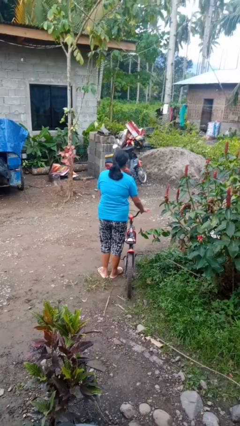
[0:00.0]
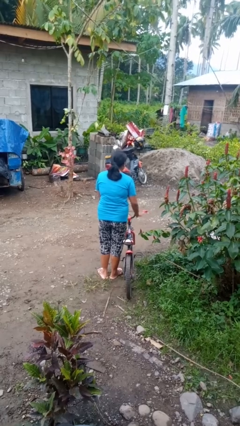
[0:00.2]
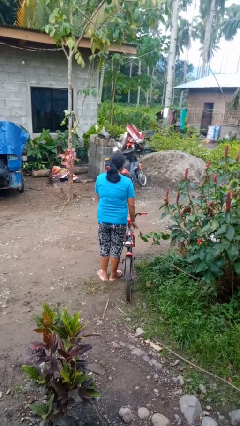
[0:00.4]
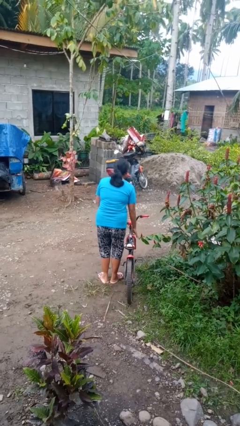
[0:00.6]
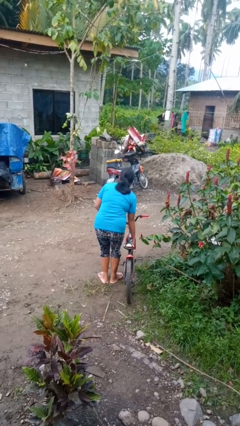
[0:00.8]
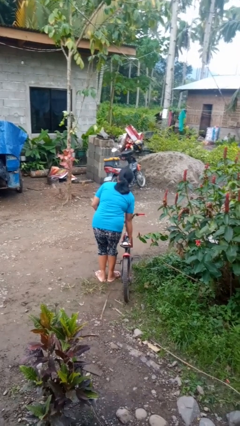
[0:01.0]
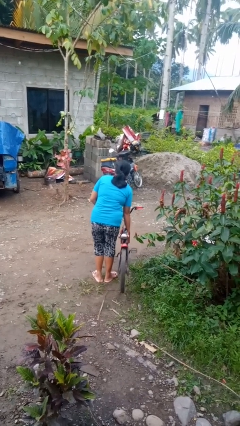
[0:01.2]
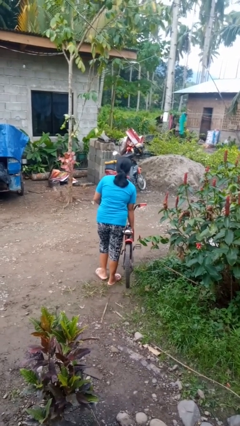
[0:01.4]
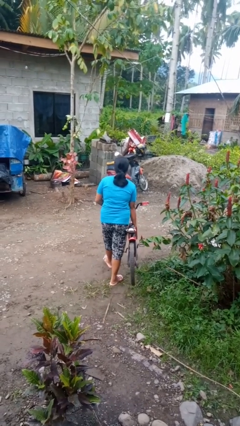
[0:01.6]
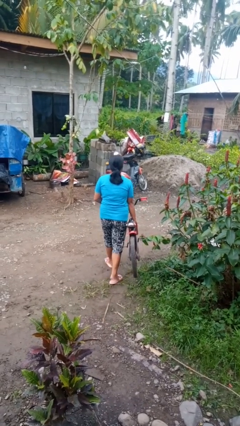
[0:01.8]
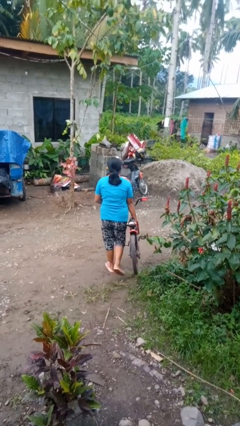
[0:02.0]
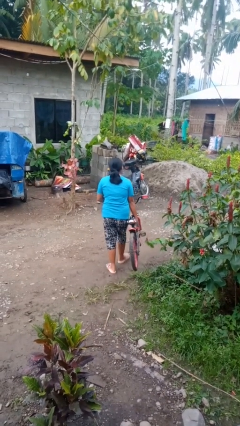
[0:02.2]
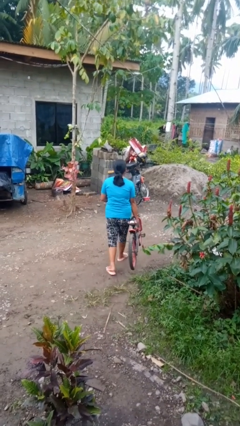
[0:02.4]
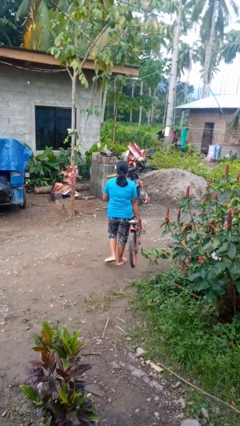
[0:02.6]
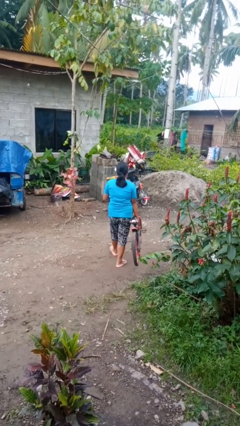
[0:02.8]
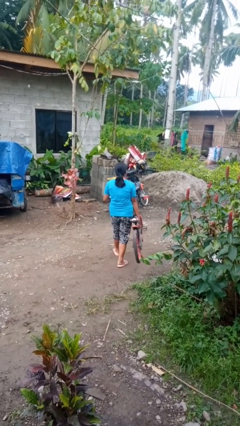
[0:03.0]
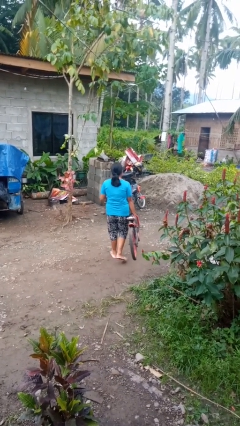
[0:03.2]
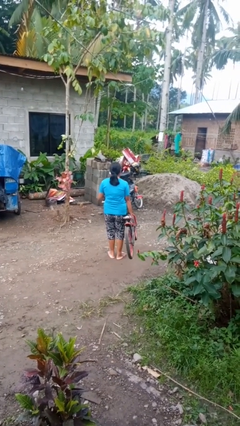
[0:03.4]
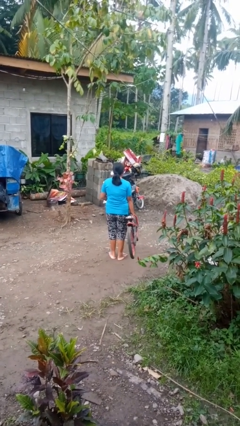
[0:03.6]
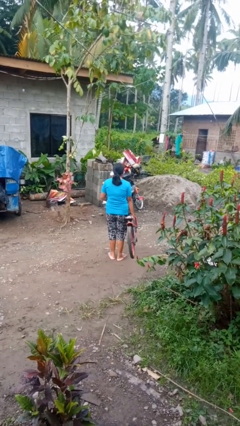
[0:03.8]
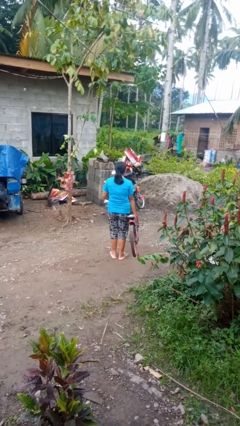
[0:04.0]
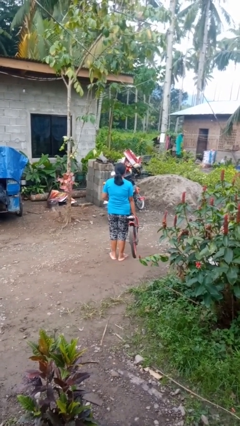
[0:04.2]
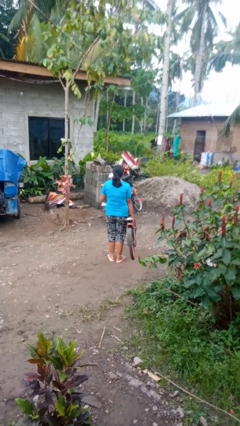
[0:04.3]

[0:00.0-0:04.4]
person carries bicycle

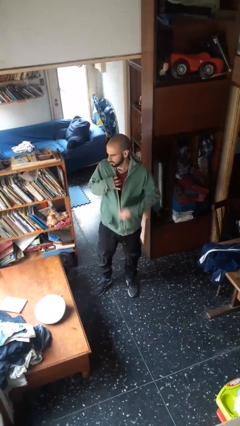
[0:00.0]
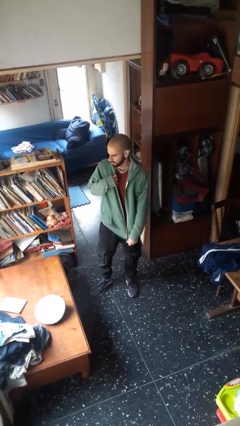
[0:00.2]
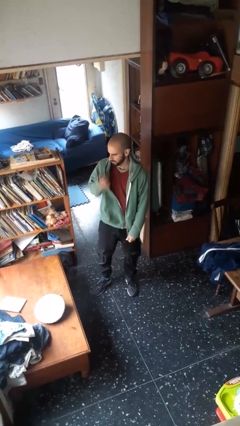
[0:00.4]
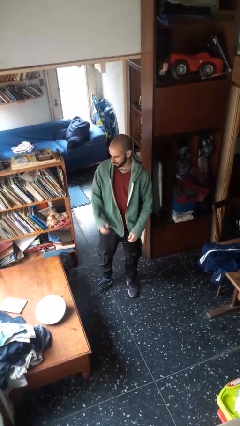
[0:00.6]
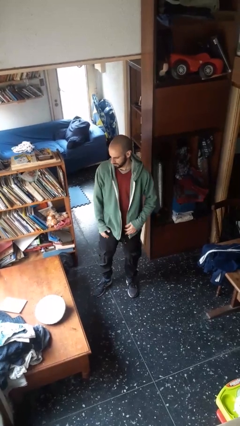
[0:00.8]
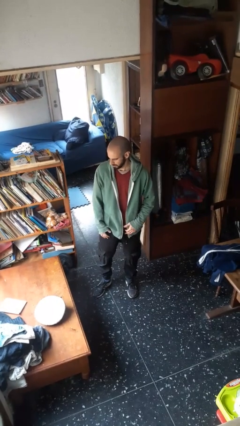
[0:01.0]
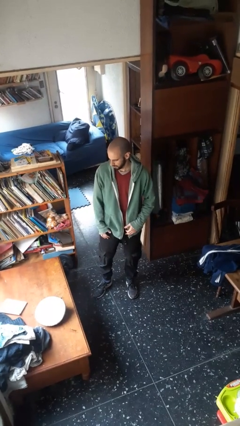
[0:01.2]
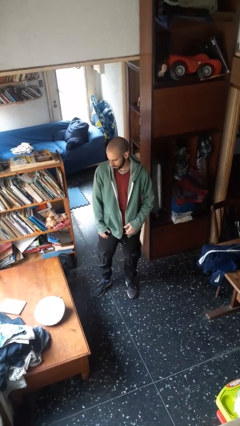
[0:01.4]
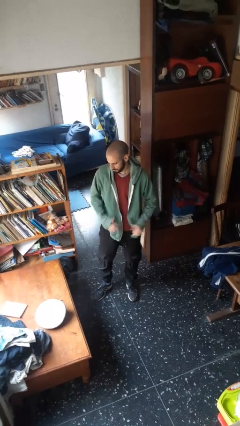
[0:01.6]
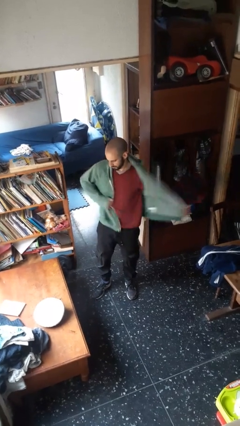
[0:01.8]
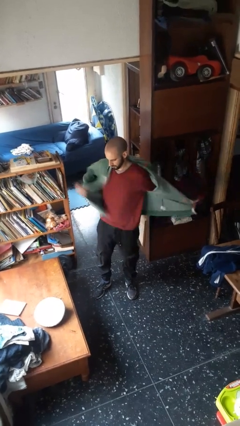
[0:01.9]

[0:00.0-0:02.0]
person unzips jacket

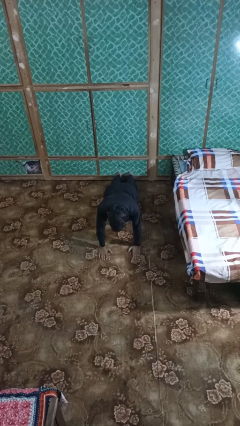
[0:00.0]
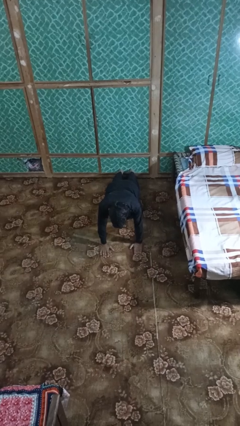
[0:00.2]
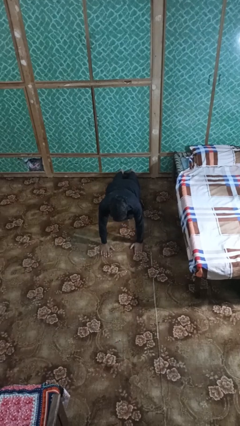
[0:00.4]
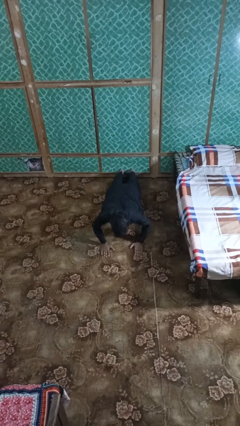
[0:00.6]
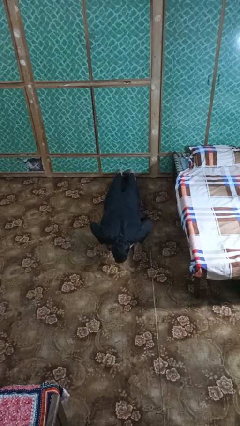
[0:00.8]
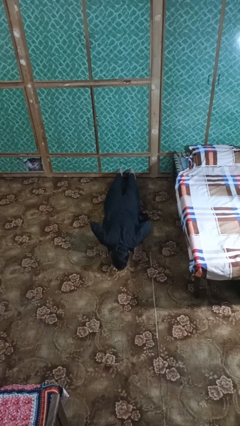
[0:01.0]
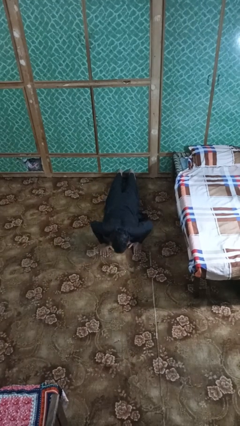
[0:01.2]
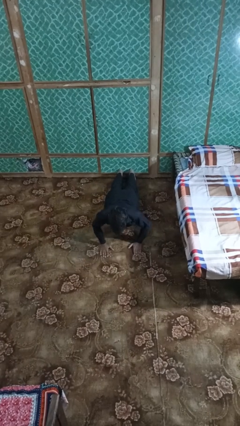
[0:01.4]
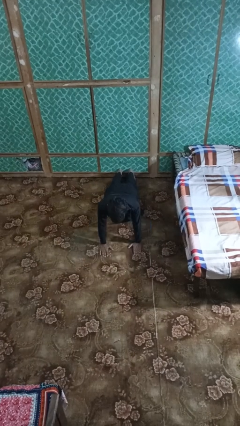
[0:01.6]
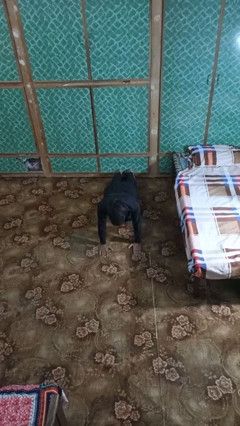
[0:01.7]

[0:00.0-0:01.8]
person exercises with pushup

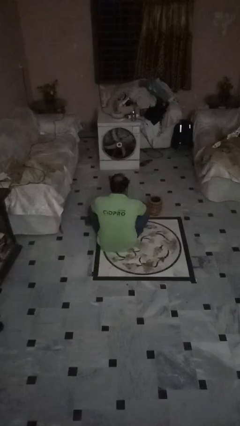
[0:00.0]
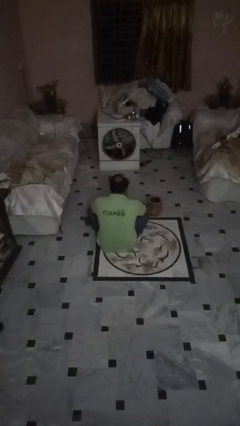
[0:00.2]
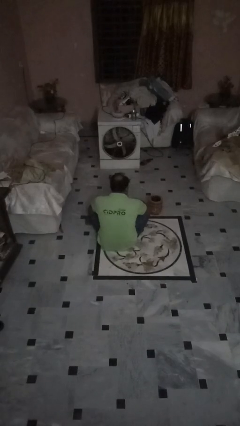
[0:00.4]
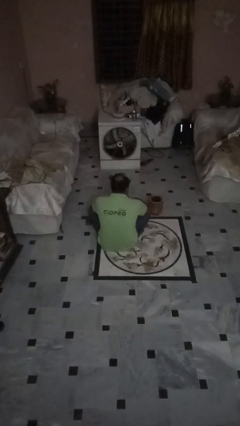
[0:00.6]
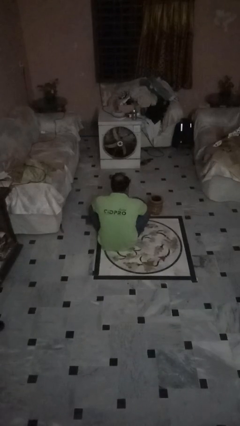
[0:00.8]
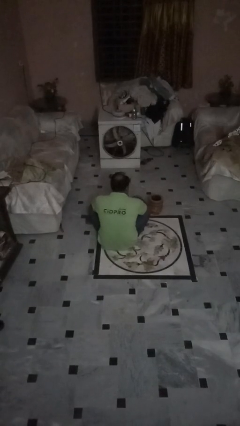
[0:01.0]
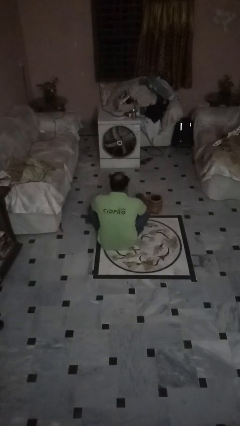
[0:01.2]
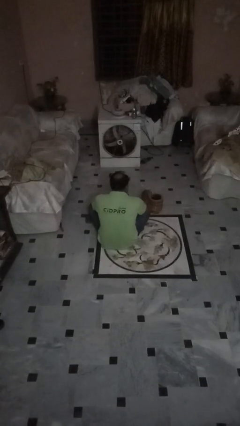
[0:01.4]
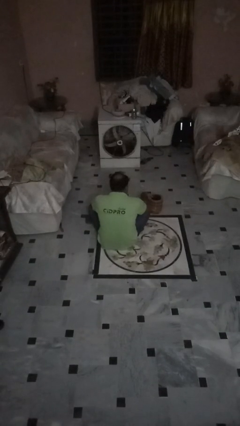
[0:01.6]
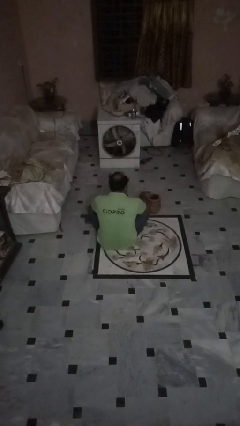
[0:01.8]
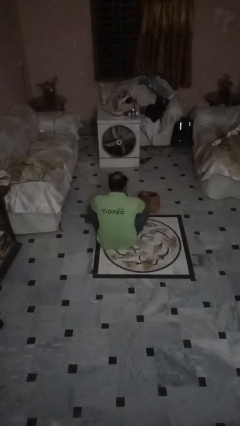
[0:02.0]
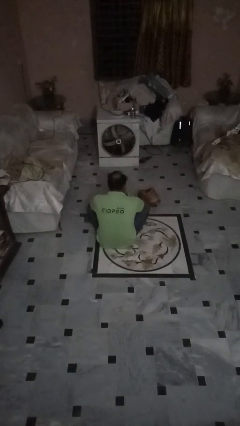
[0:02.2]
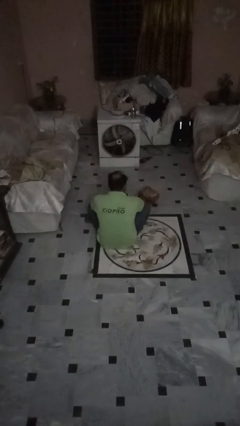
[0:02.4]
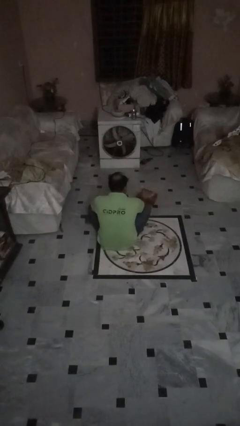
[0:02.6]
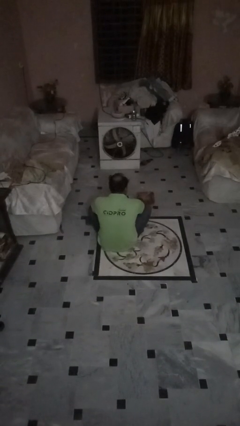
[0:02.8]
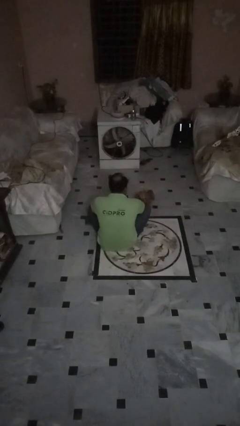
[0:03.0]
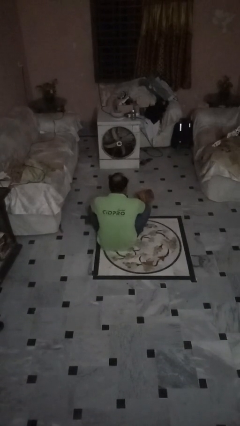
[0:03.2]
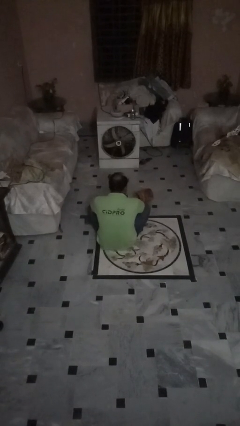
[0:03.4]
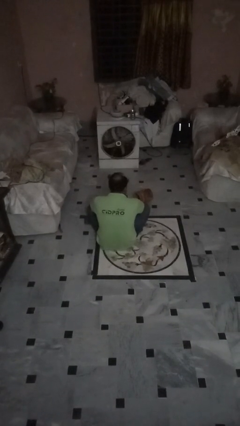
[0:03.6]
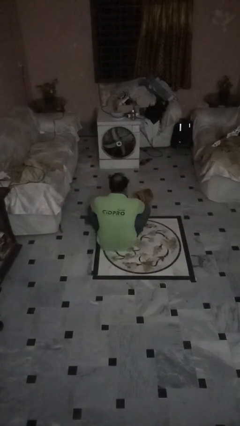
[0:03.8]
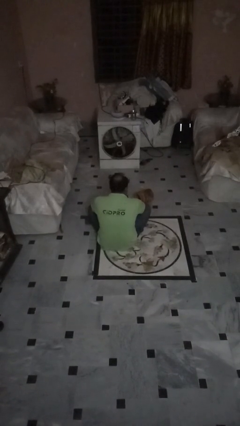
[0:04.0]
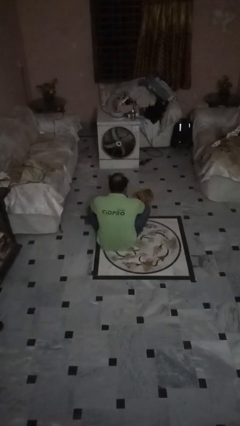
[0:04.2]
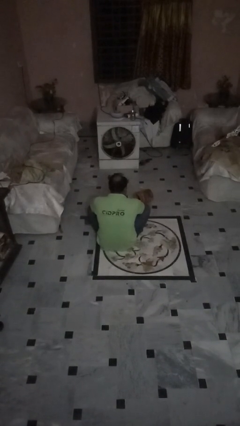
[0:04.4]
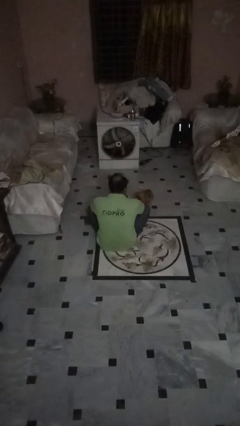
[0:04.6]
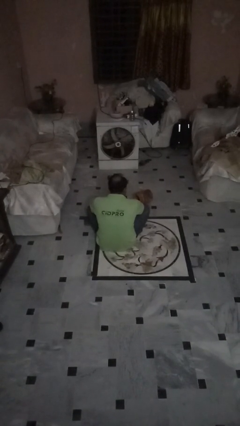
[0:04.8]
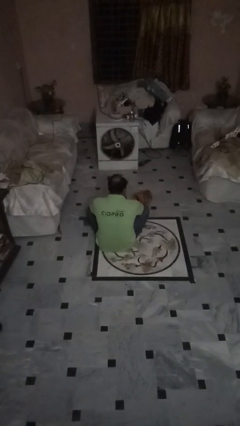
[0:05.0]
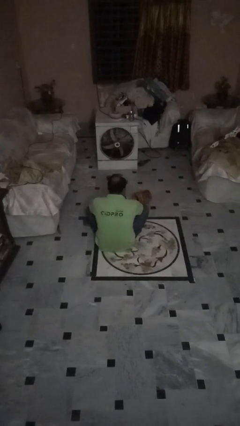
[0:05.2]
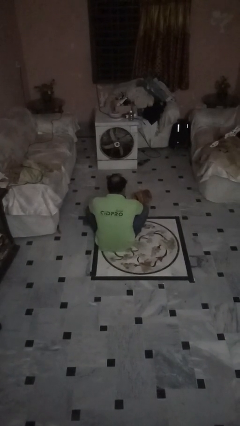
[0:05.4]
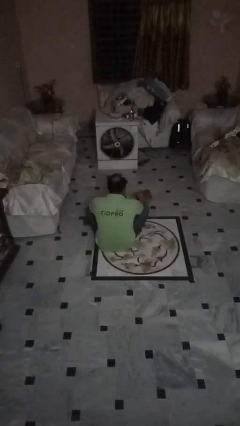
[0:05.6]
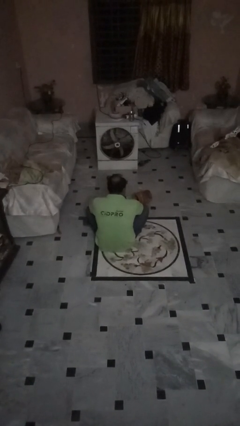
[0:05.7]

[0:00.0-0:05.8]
person knocks over furniture

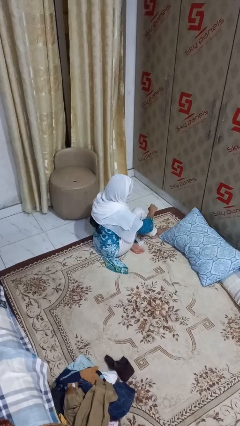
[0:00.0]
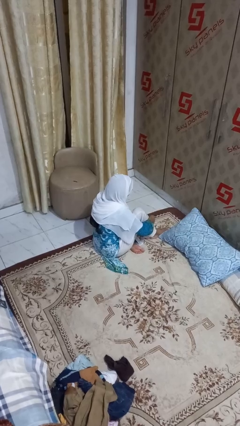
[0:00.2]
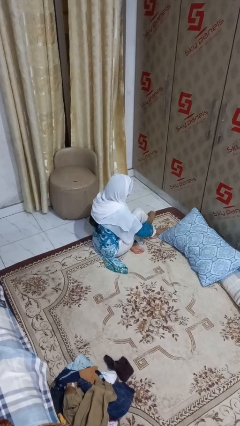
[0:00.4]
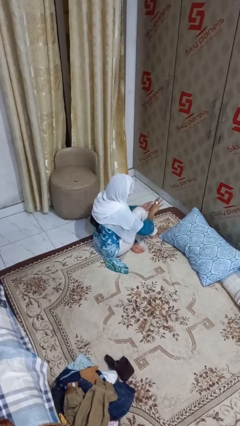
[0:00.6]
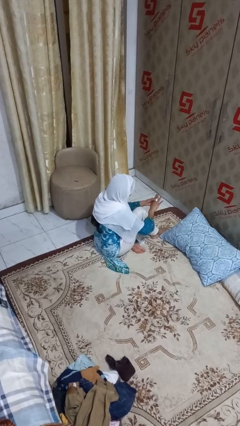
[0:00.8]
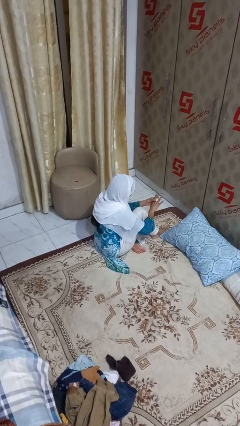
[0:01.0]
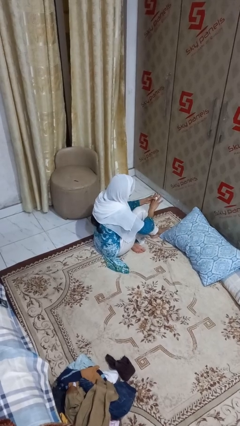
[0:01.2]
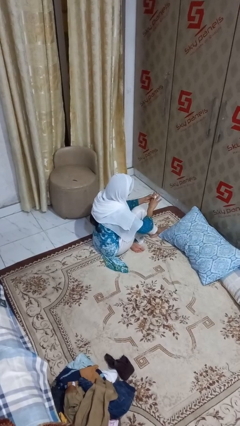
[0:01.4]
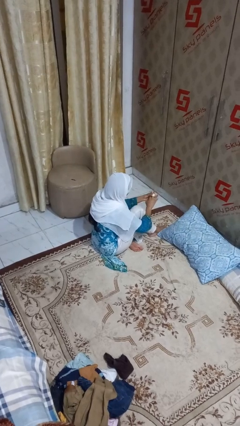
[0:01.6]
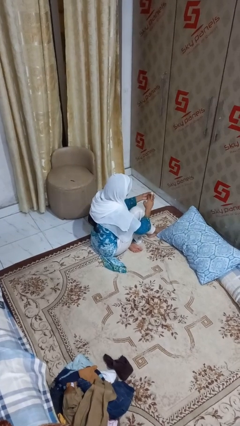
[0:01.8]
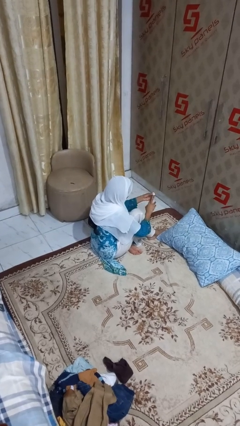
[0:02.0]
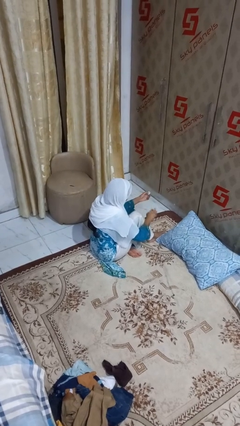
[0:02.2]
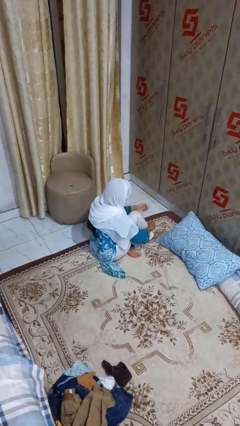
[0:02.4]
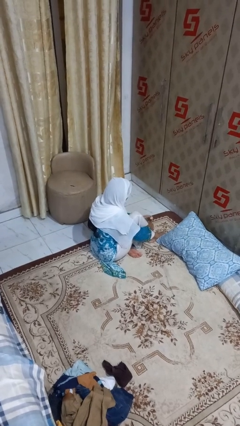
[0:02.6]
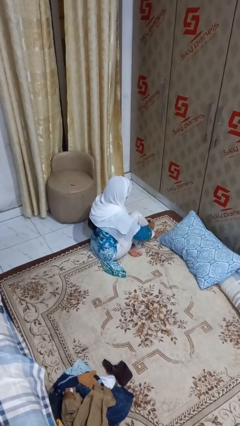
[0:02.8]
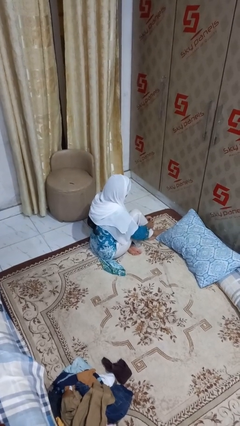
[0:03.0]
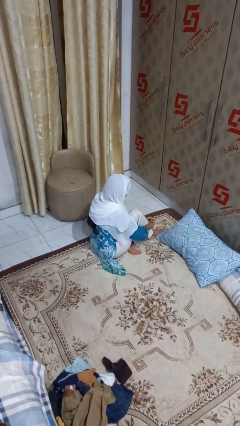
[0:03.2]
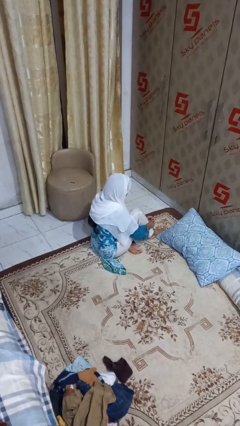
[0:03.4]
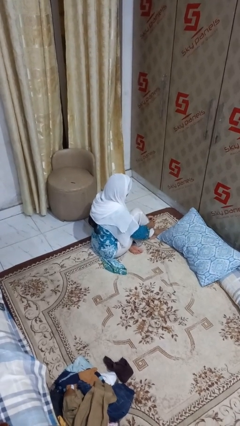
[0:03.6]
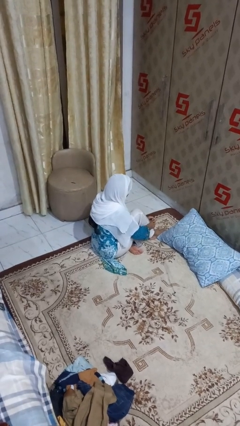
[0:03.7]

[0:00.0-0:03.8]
person takes off ring
